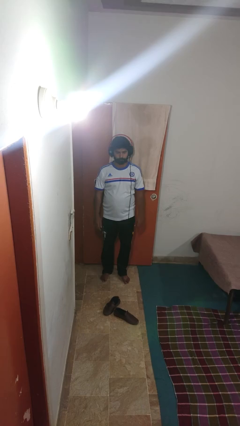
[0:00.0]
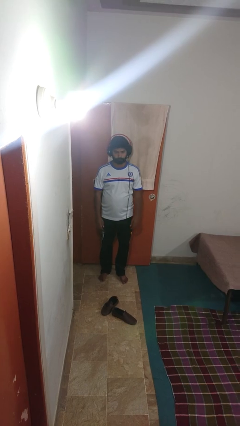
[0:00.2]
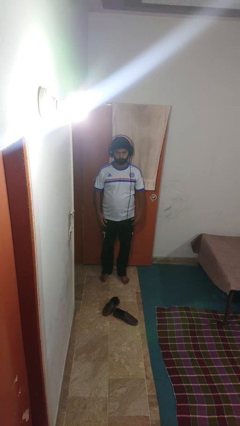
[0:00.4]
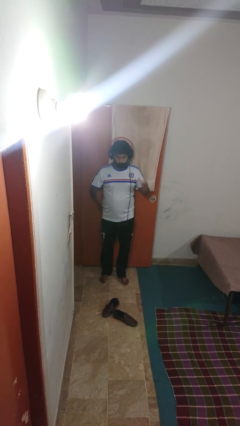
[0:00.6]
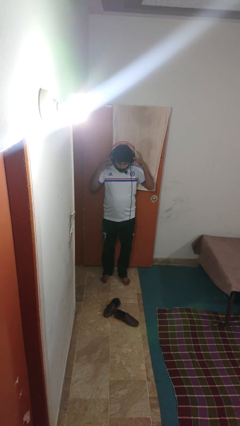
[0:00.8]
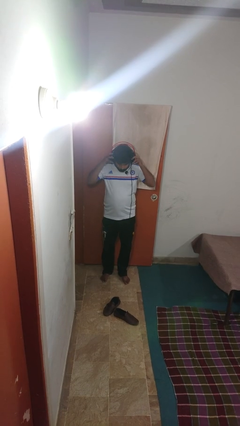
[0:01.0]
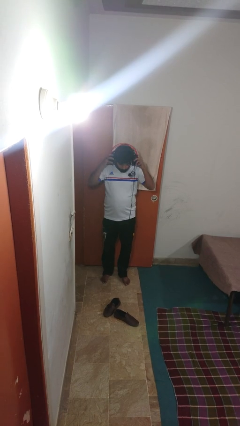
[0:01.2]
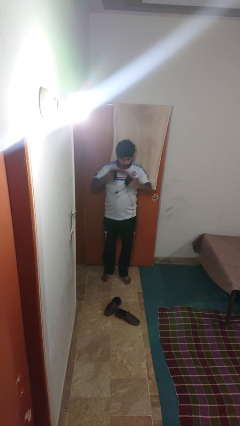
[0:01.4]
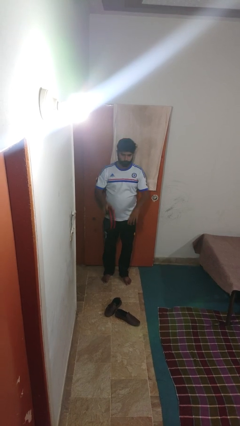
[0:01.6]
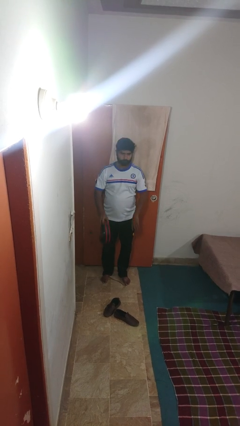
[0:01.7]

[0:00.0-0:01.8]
person takes off headphones

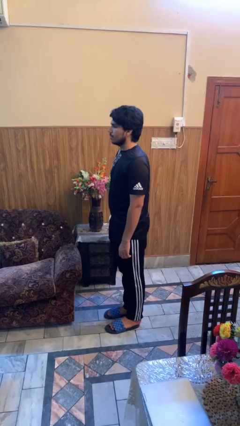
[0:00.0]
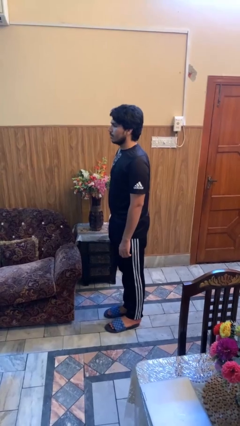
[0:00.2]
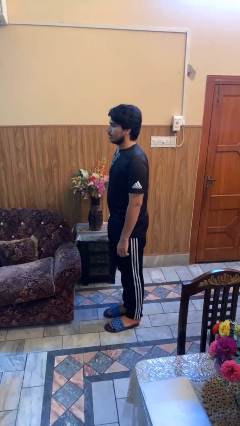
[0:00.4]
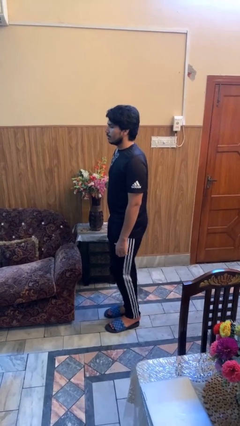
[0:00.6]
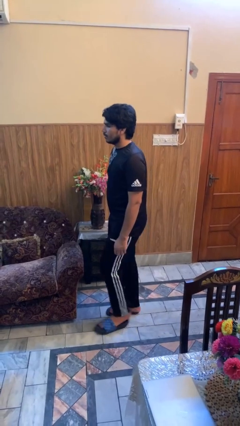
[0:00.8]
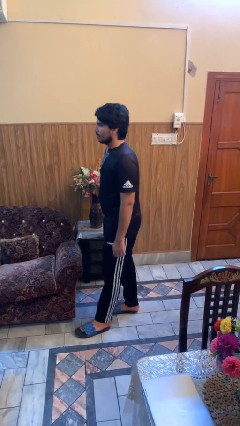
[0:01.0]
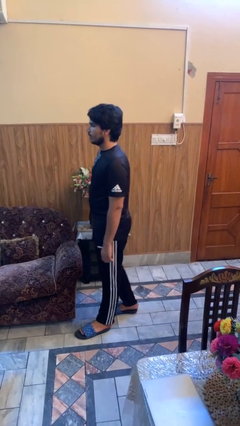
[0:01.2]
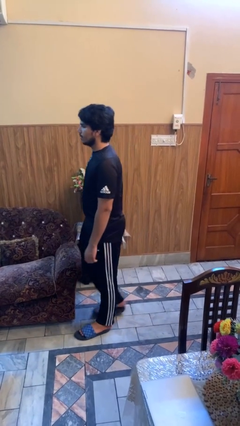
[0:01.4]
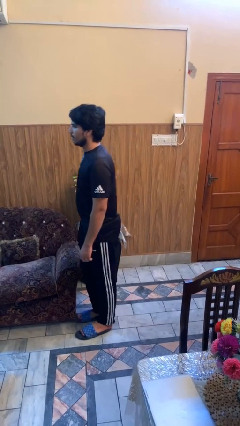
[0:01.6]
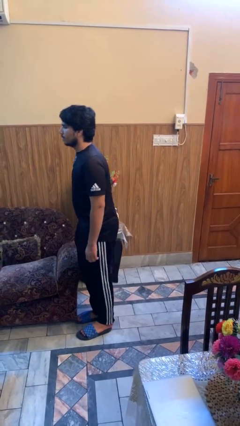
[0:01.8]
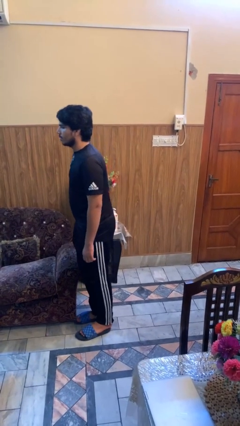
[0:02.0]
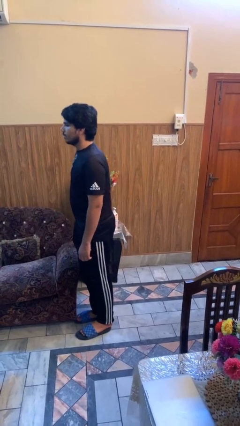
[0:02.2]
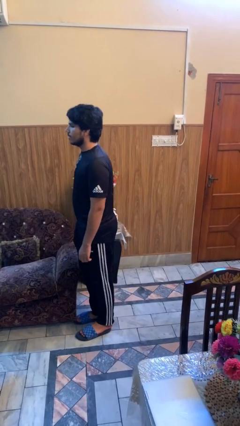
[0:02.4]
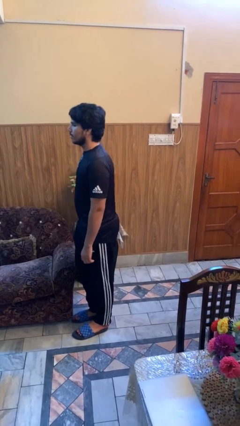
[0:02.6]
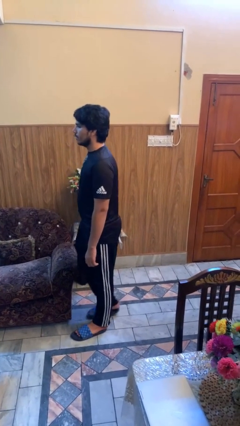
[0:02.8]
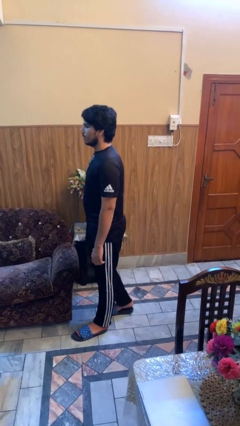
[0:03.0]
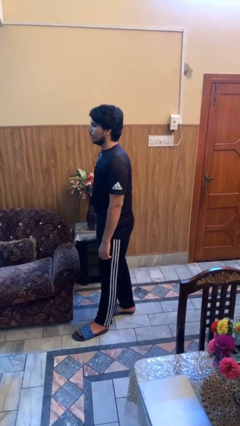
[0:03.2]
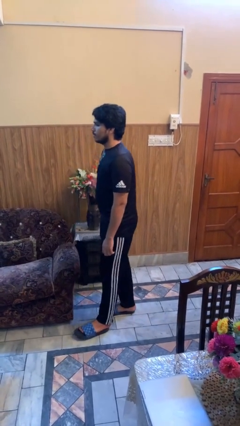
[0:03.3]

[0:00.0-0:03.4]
person stubs toe

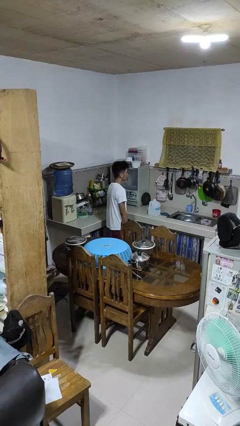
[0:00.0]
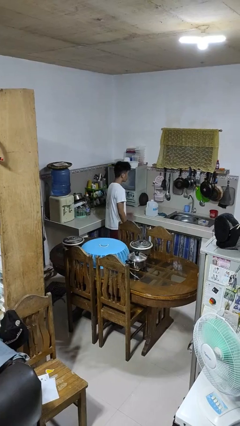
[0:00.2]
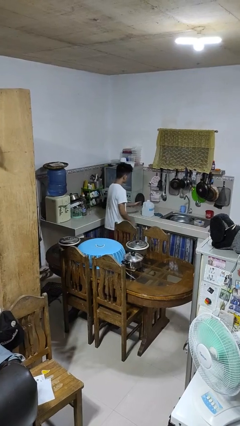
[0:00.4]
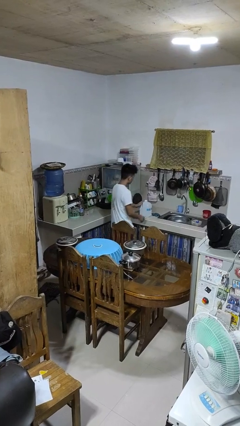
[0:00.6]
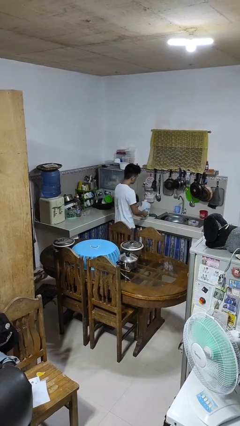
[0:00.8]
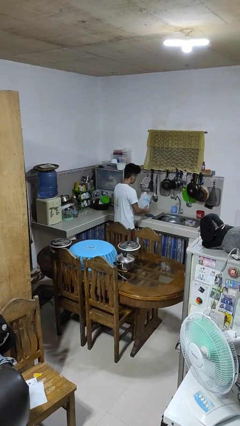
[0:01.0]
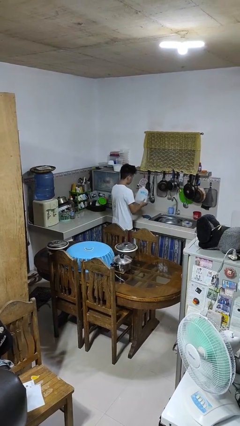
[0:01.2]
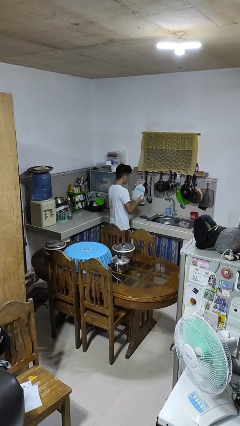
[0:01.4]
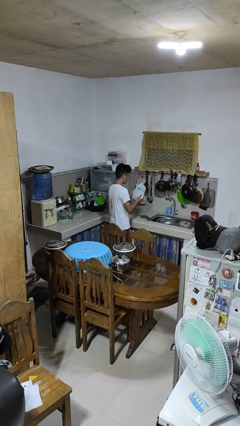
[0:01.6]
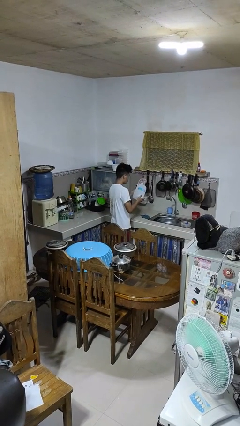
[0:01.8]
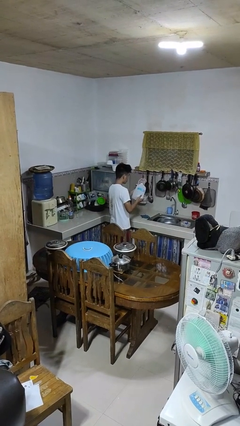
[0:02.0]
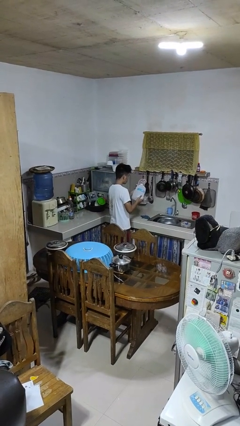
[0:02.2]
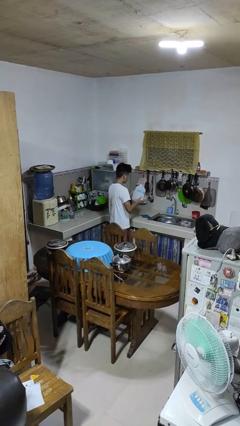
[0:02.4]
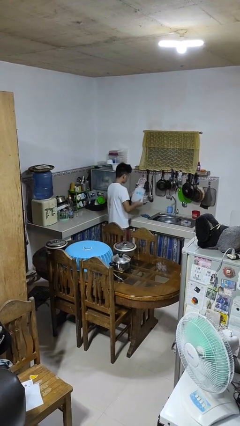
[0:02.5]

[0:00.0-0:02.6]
person picks up object from countertop

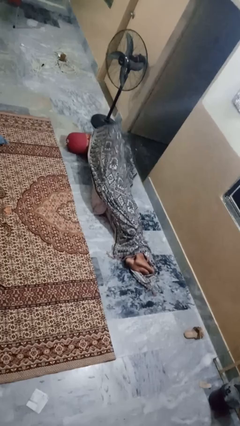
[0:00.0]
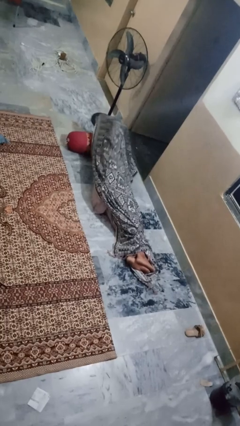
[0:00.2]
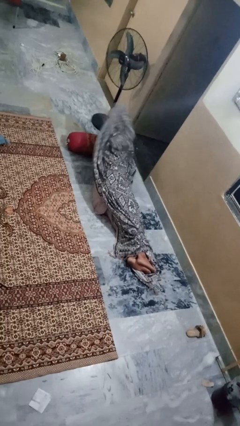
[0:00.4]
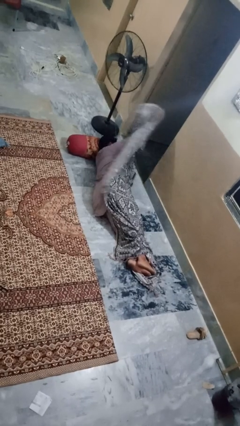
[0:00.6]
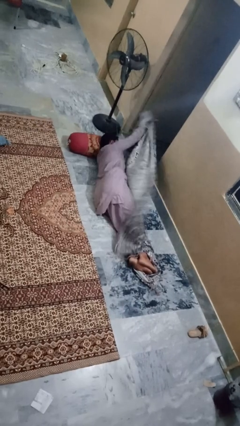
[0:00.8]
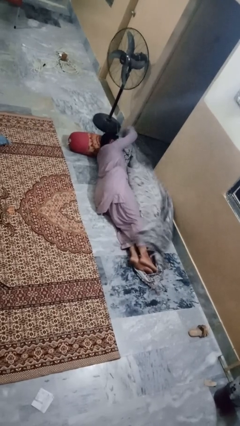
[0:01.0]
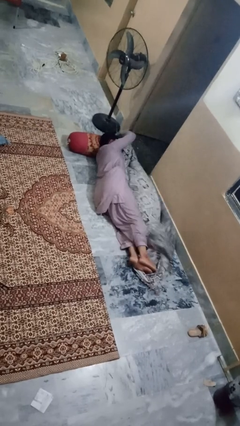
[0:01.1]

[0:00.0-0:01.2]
person uncovers with blanket

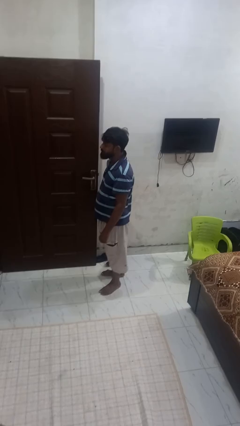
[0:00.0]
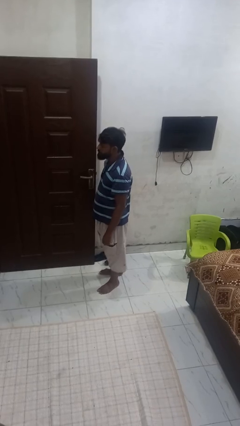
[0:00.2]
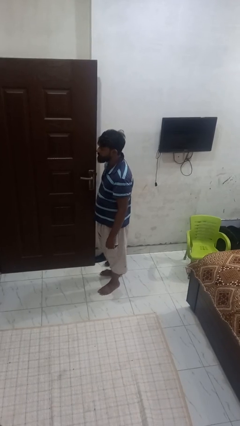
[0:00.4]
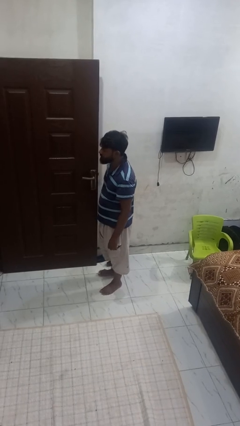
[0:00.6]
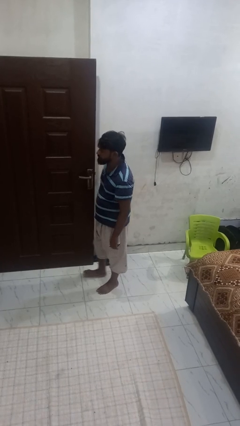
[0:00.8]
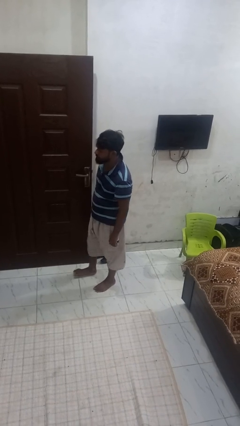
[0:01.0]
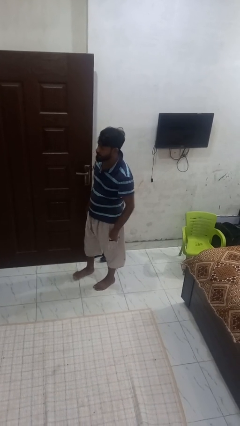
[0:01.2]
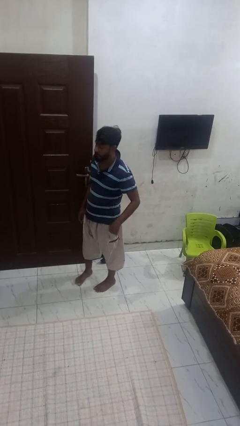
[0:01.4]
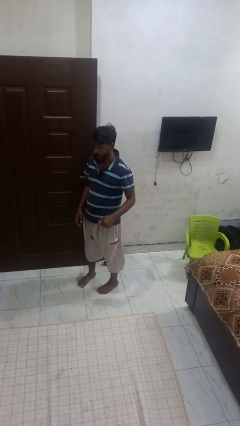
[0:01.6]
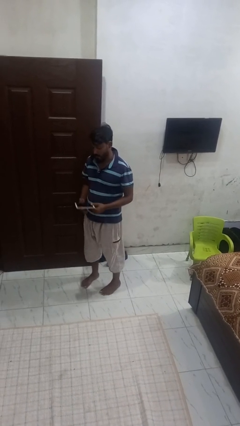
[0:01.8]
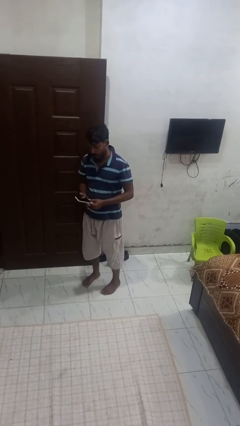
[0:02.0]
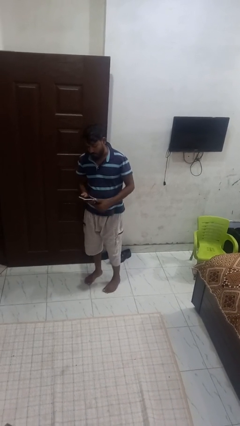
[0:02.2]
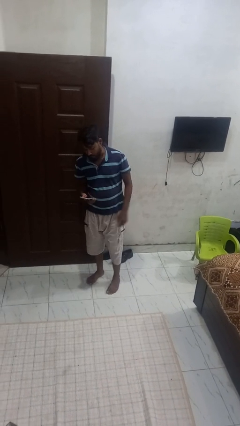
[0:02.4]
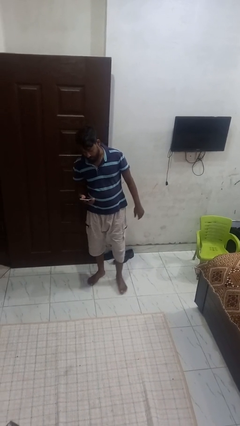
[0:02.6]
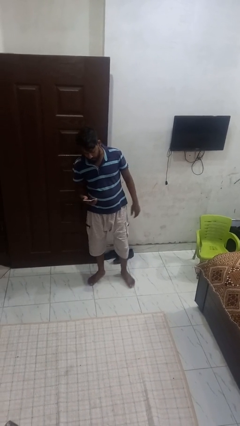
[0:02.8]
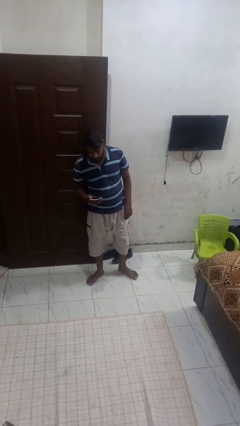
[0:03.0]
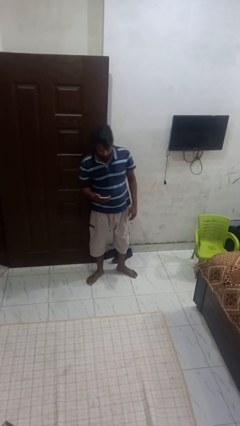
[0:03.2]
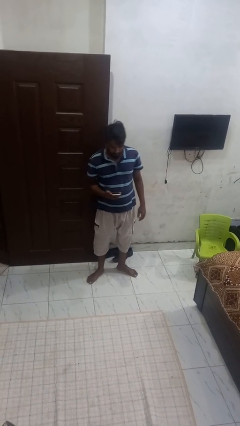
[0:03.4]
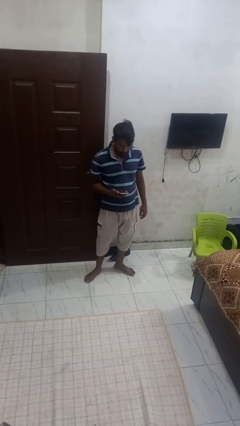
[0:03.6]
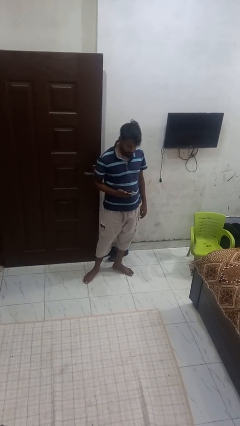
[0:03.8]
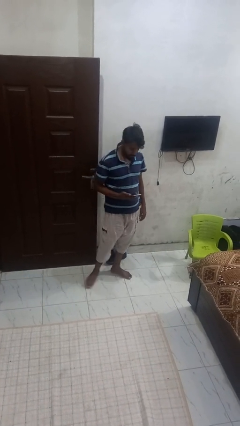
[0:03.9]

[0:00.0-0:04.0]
person takes phone from pocket

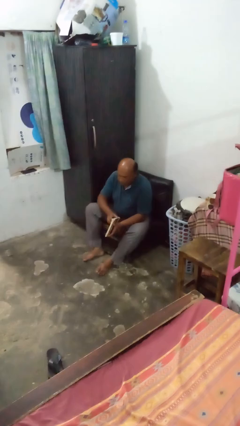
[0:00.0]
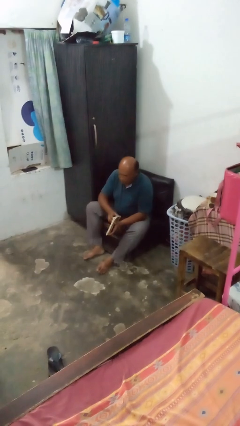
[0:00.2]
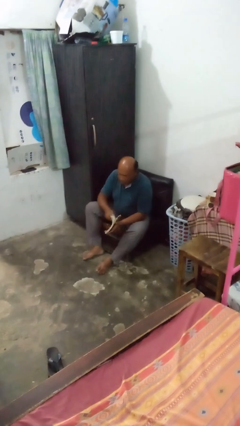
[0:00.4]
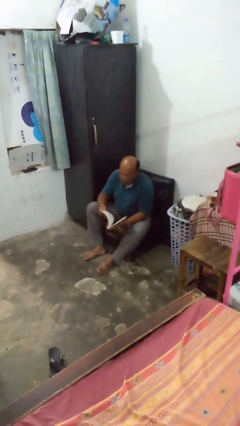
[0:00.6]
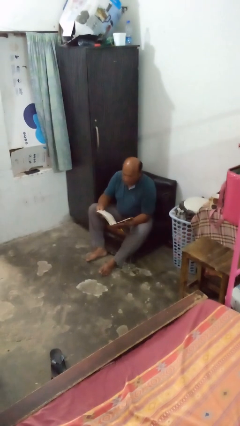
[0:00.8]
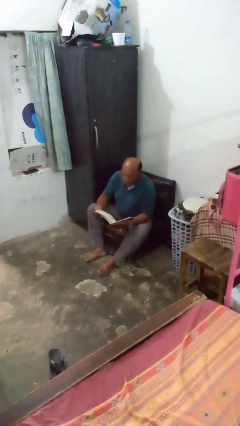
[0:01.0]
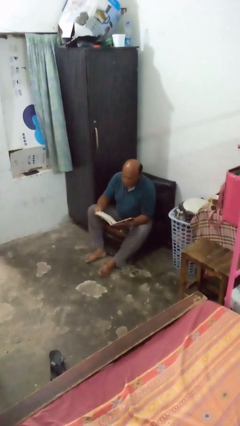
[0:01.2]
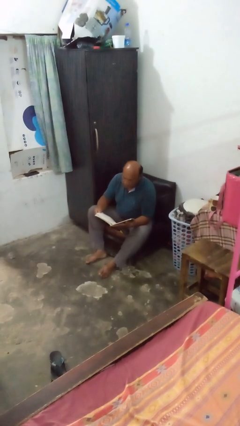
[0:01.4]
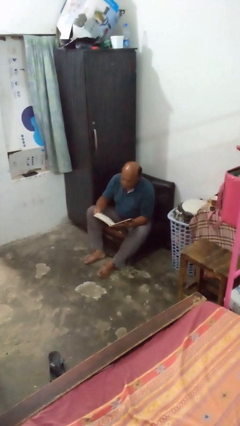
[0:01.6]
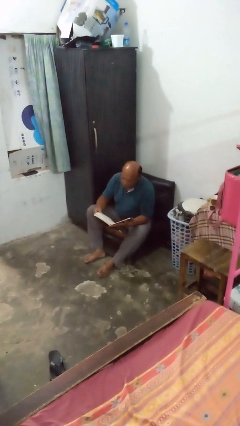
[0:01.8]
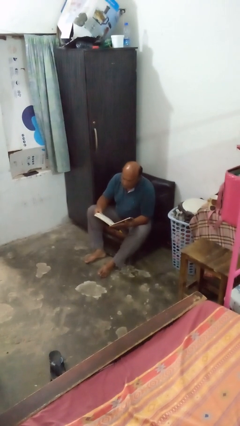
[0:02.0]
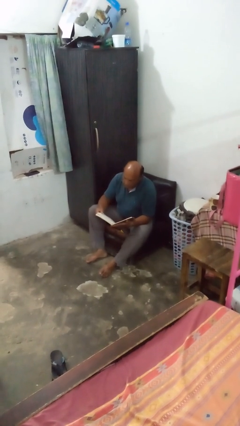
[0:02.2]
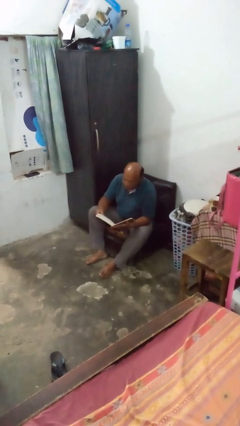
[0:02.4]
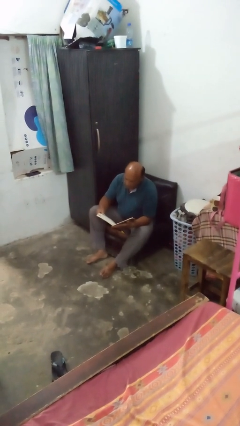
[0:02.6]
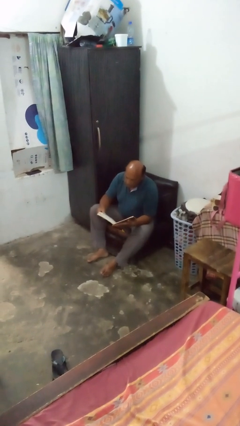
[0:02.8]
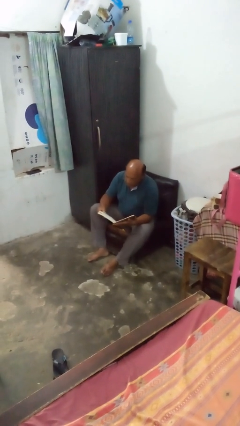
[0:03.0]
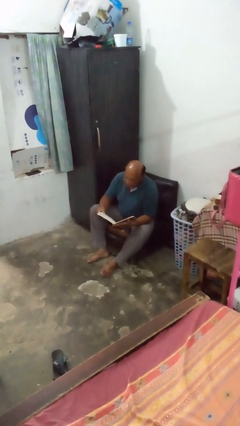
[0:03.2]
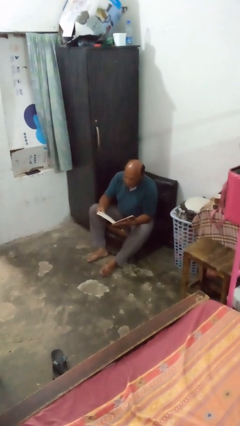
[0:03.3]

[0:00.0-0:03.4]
person reads magazine

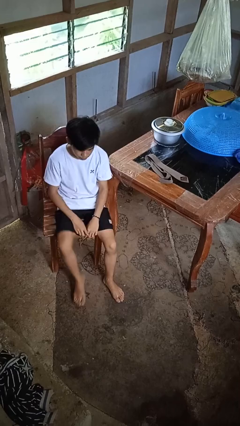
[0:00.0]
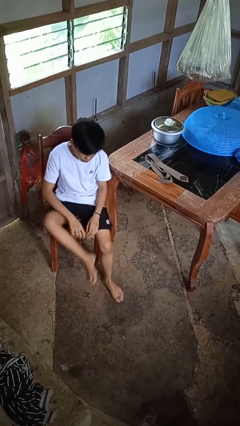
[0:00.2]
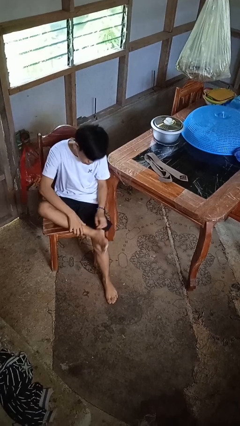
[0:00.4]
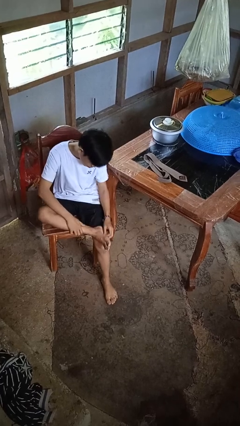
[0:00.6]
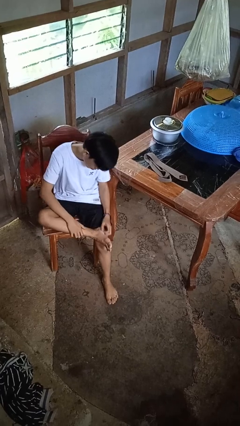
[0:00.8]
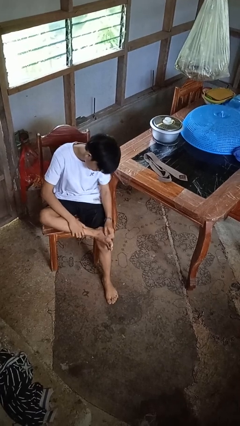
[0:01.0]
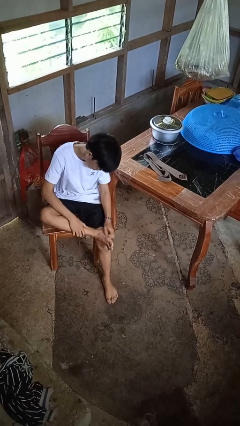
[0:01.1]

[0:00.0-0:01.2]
person rubs foot
